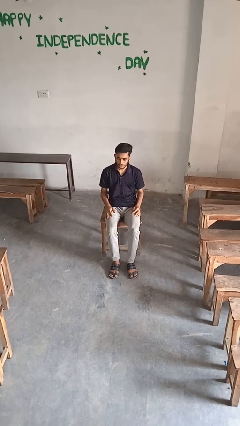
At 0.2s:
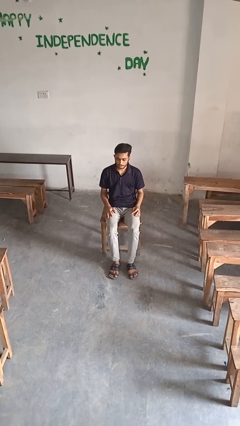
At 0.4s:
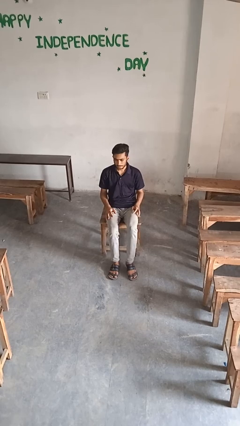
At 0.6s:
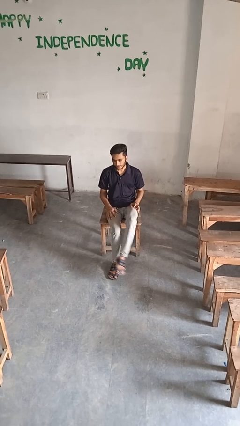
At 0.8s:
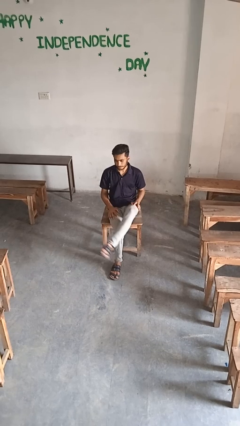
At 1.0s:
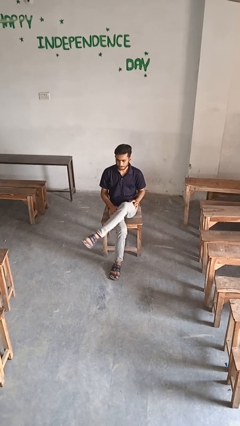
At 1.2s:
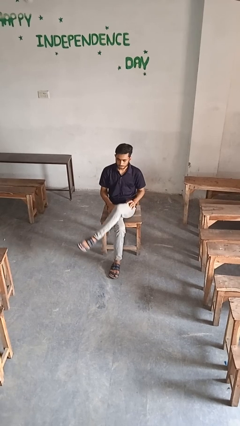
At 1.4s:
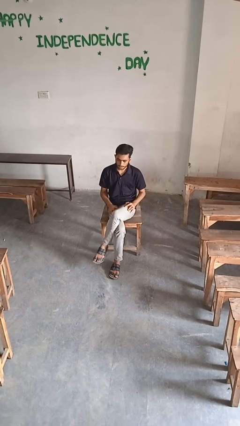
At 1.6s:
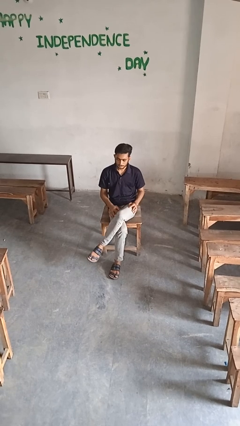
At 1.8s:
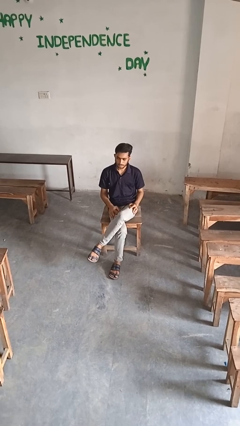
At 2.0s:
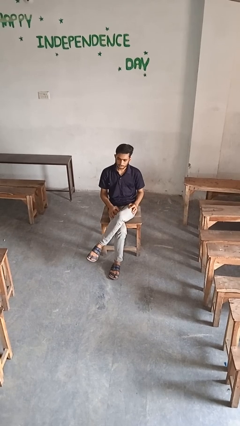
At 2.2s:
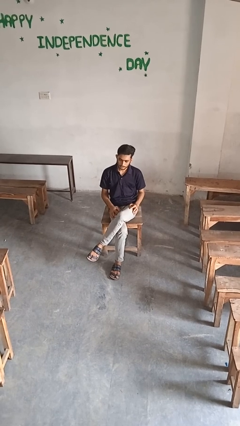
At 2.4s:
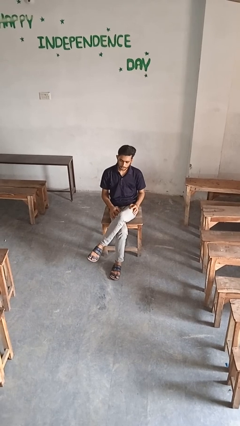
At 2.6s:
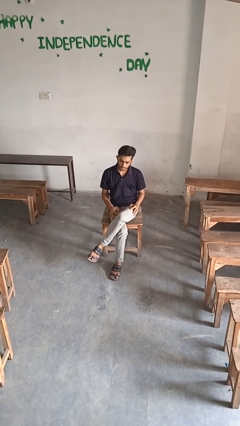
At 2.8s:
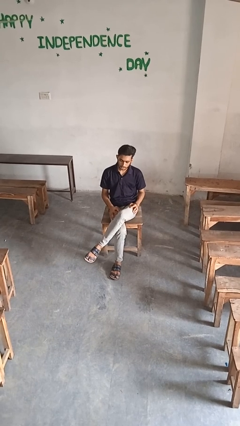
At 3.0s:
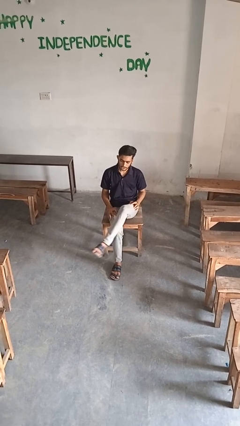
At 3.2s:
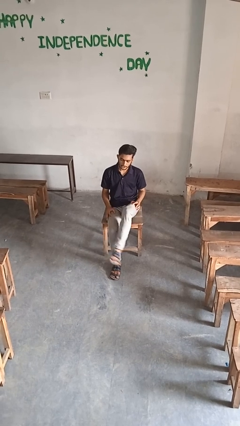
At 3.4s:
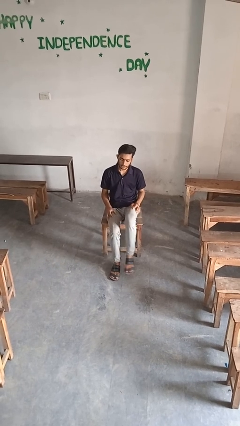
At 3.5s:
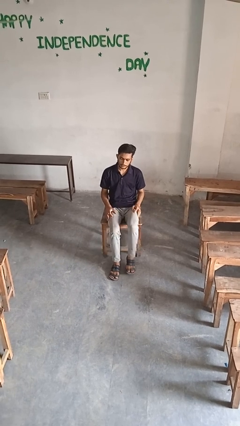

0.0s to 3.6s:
person crosses legs

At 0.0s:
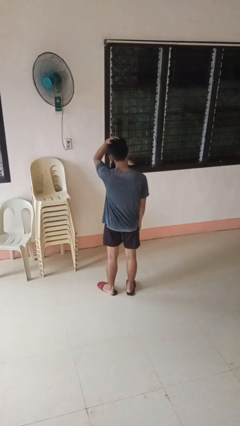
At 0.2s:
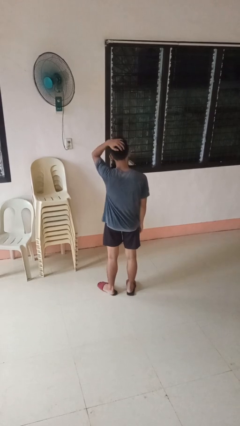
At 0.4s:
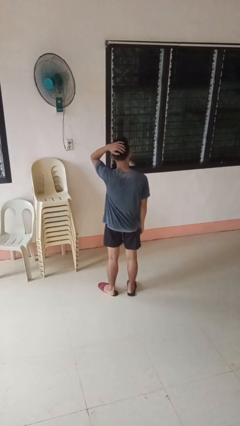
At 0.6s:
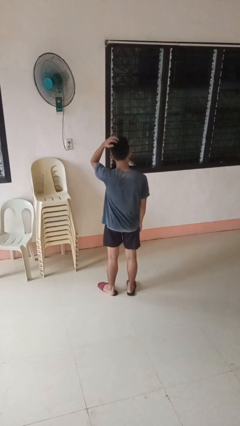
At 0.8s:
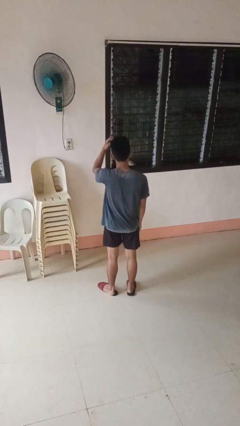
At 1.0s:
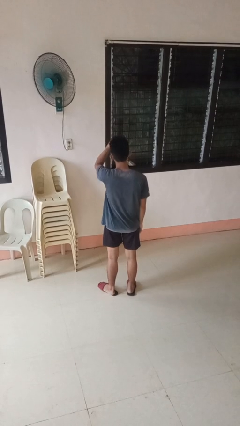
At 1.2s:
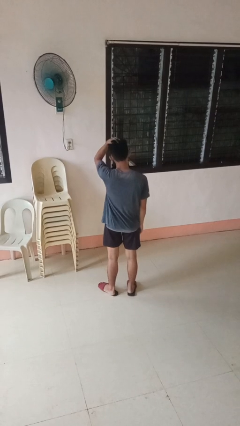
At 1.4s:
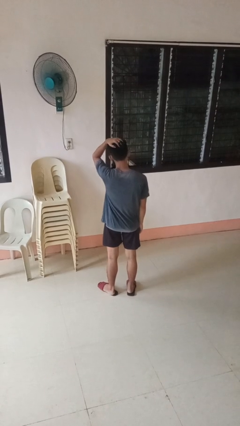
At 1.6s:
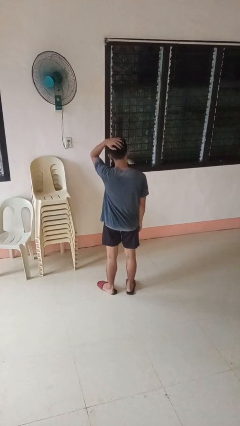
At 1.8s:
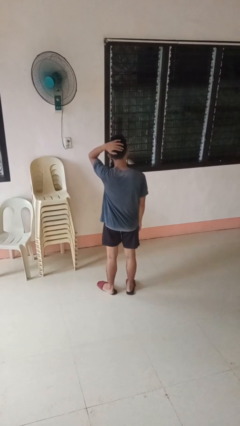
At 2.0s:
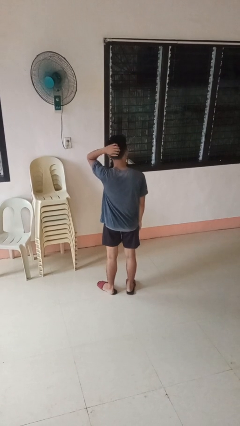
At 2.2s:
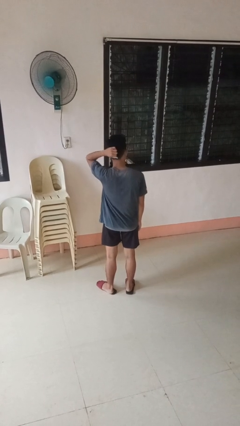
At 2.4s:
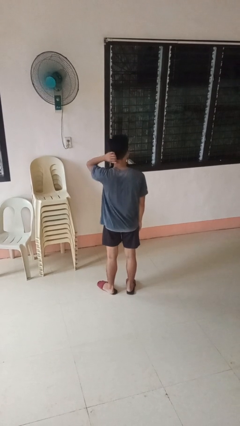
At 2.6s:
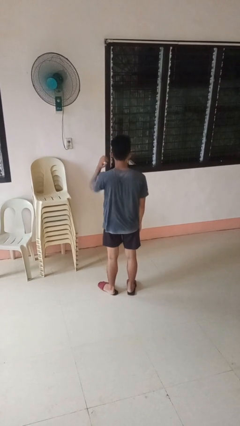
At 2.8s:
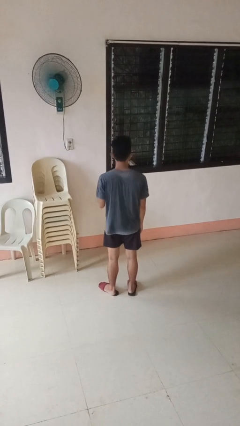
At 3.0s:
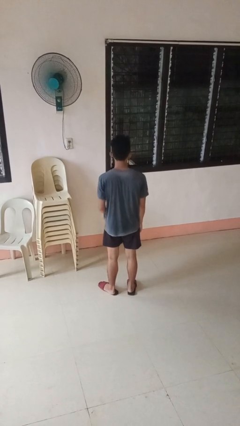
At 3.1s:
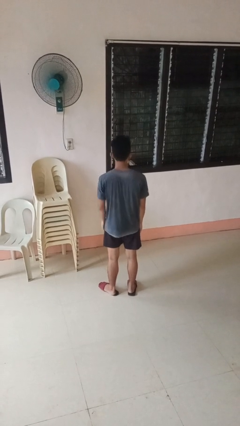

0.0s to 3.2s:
person strokes hair

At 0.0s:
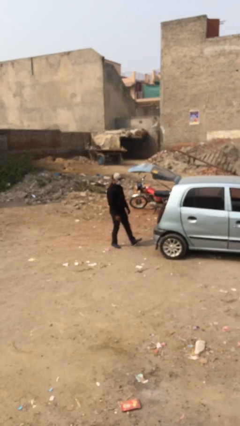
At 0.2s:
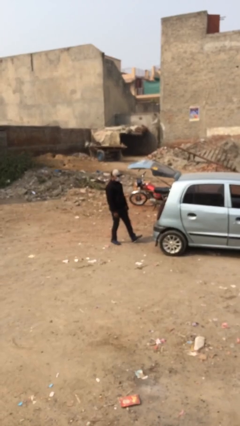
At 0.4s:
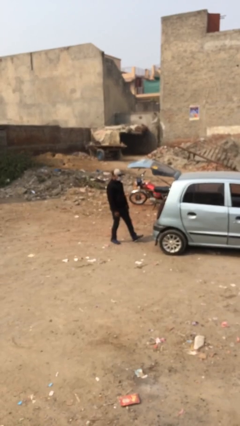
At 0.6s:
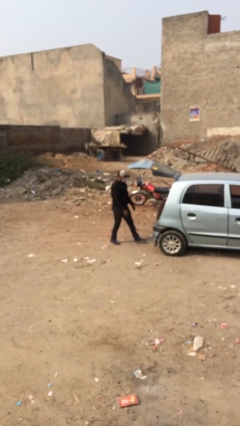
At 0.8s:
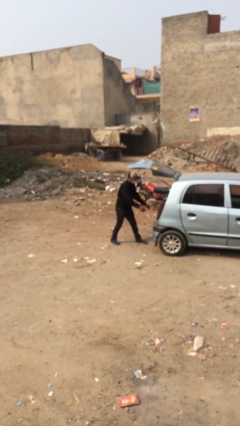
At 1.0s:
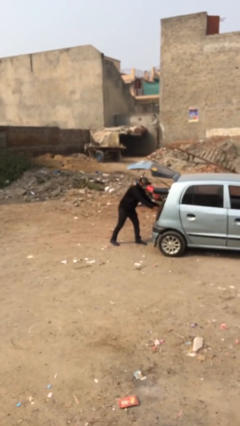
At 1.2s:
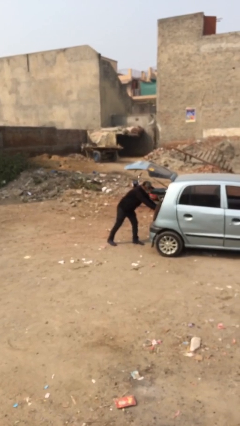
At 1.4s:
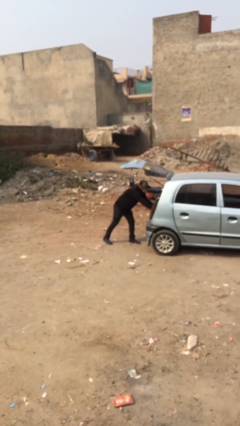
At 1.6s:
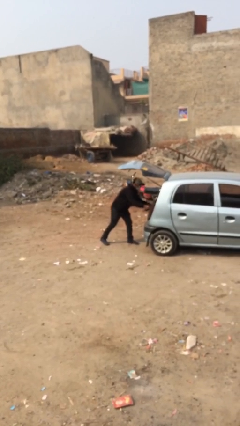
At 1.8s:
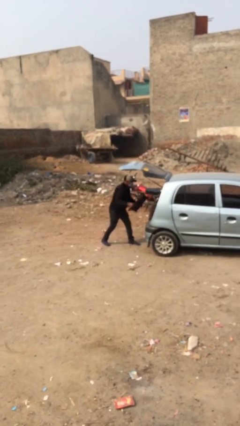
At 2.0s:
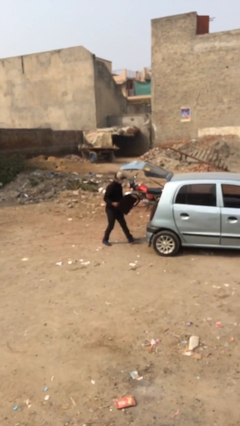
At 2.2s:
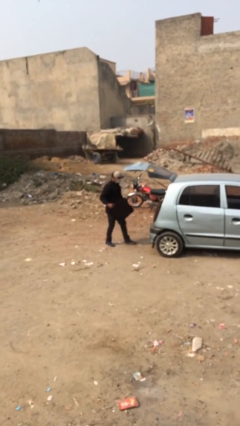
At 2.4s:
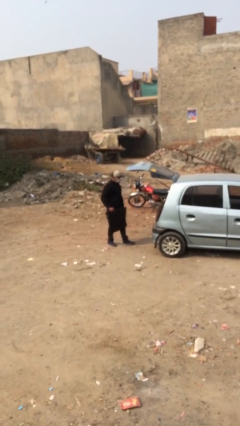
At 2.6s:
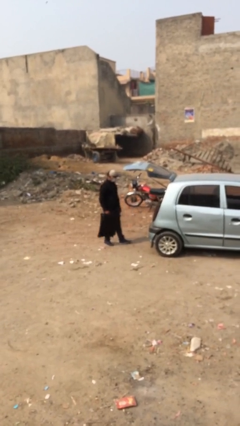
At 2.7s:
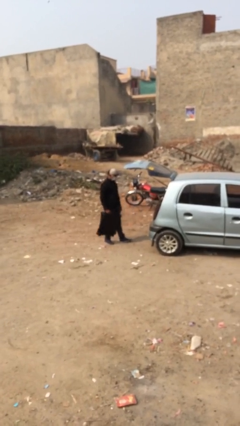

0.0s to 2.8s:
person unloads car

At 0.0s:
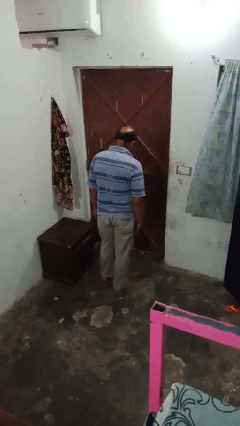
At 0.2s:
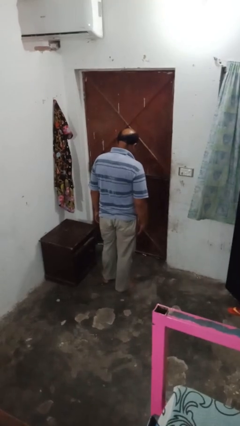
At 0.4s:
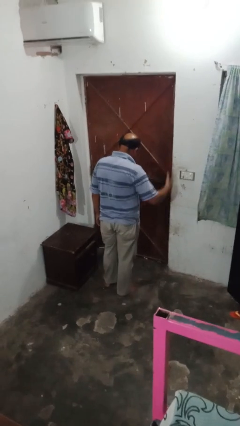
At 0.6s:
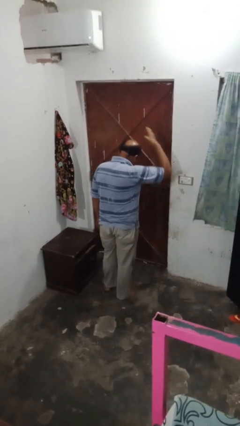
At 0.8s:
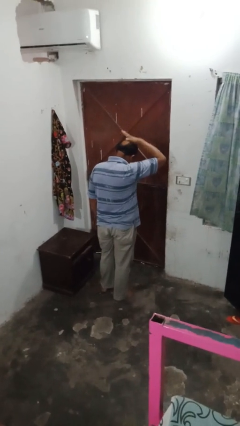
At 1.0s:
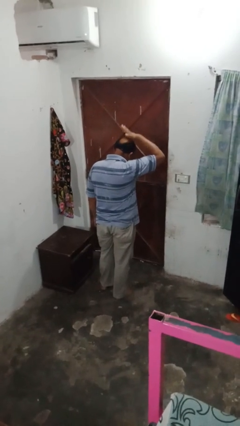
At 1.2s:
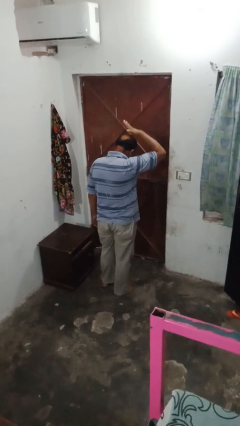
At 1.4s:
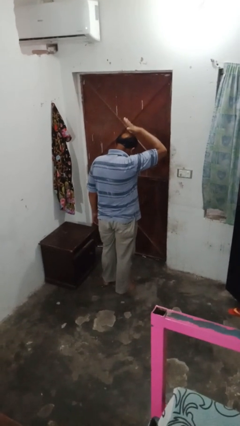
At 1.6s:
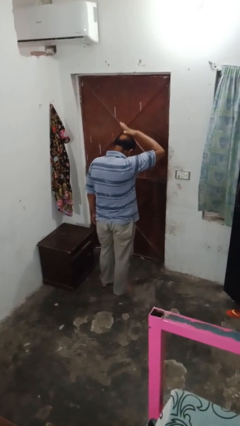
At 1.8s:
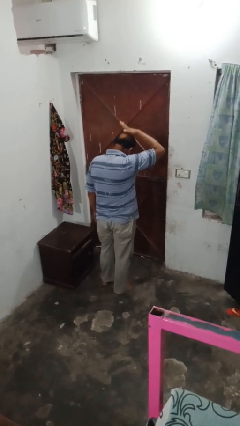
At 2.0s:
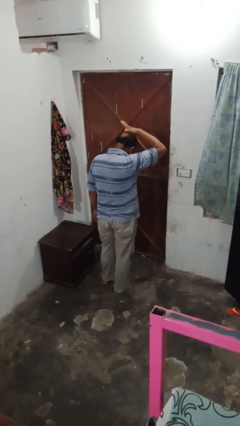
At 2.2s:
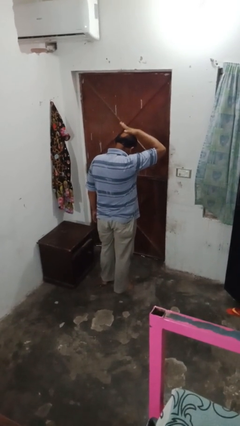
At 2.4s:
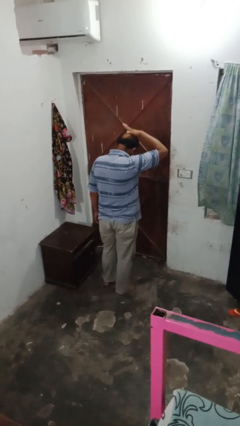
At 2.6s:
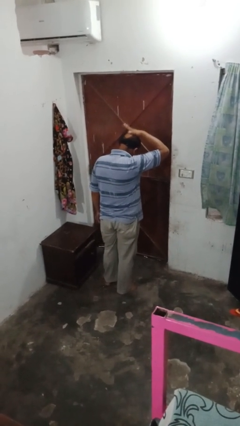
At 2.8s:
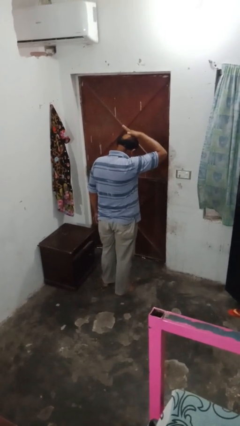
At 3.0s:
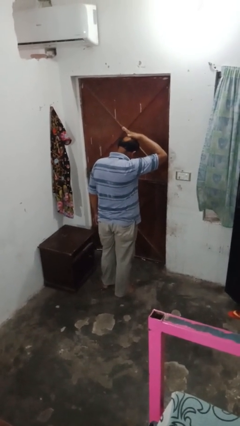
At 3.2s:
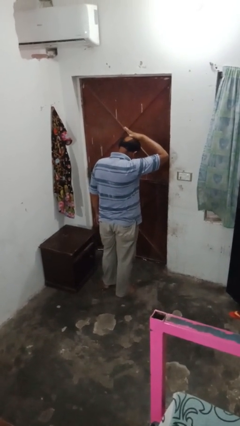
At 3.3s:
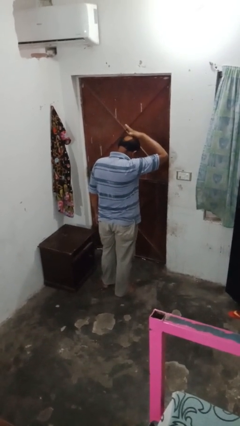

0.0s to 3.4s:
person pats head

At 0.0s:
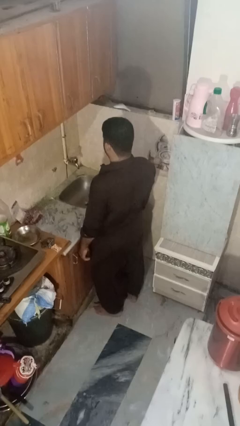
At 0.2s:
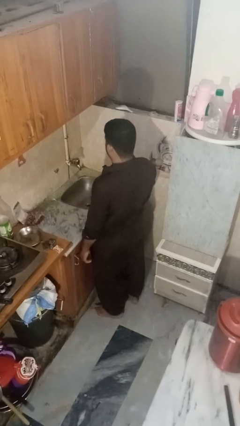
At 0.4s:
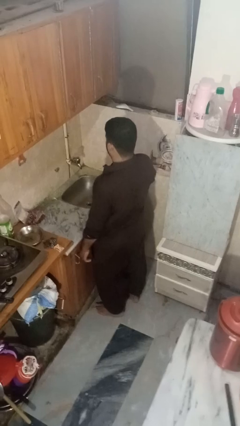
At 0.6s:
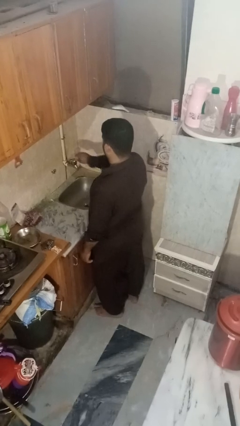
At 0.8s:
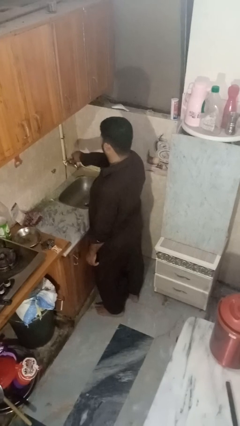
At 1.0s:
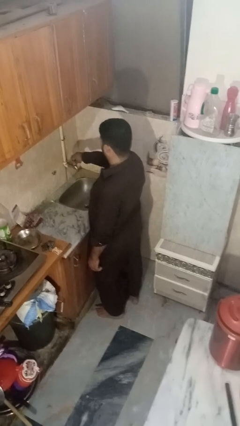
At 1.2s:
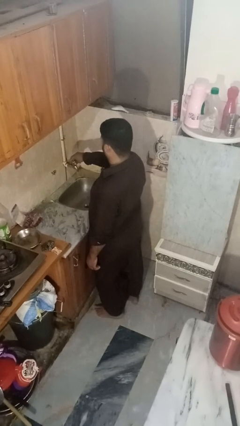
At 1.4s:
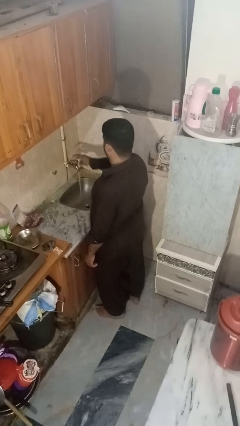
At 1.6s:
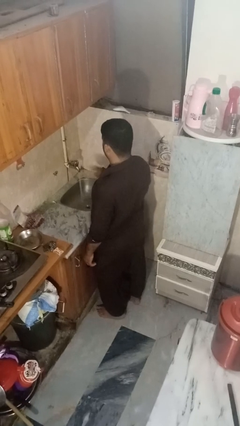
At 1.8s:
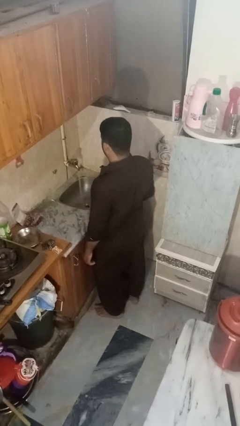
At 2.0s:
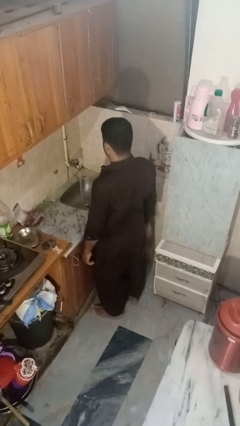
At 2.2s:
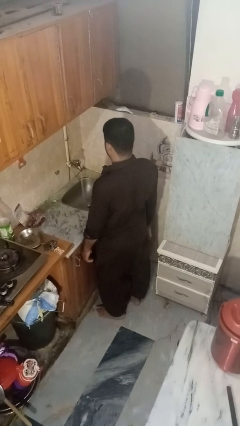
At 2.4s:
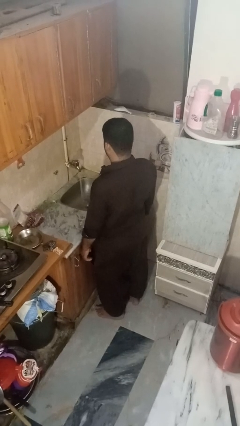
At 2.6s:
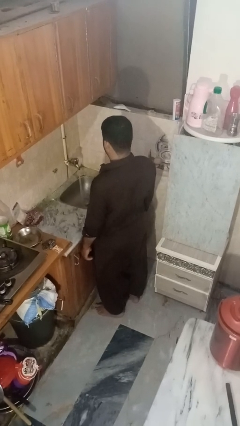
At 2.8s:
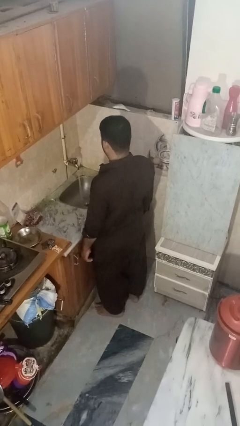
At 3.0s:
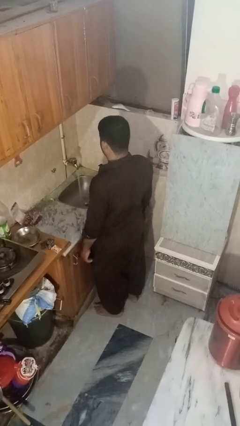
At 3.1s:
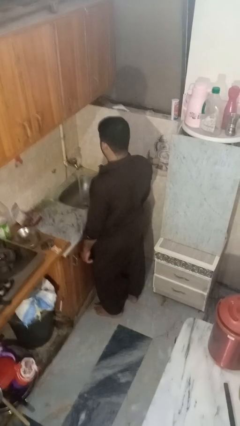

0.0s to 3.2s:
person turns on faucet

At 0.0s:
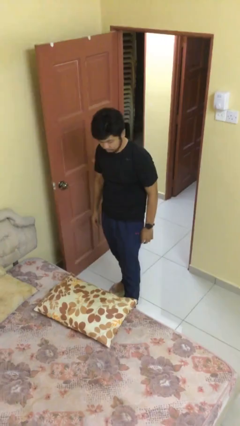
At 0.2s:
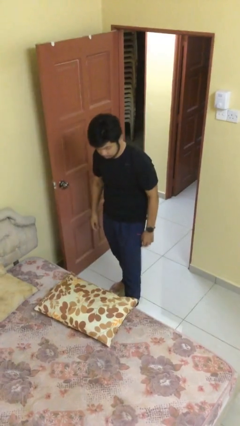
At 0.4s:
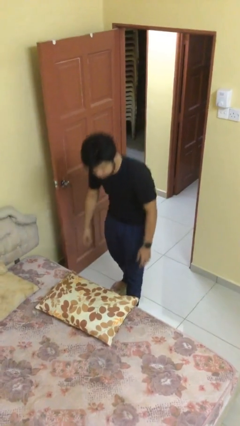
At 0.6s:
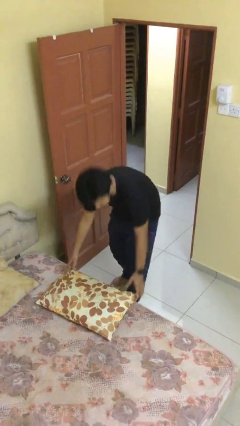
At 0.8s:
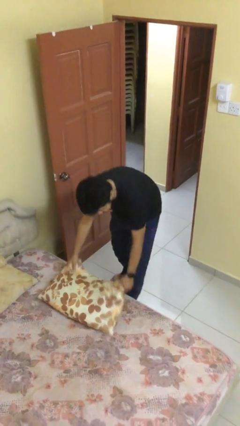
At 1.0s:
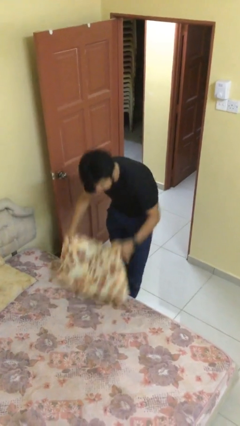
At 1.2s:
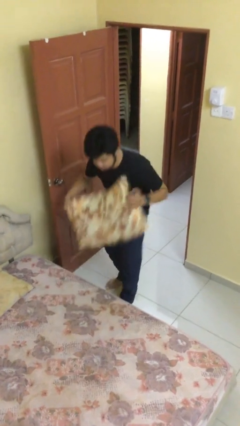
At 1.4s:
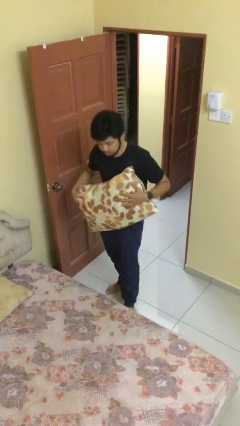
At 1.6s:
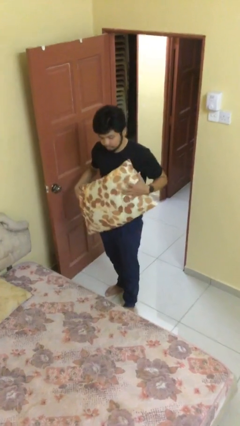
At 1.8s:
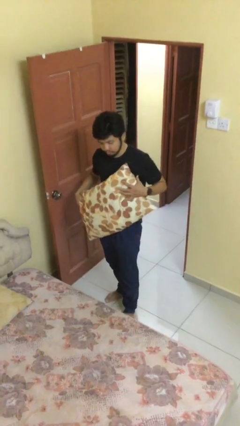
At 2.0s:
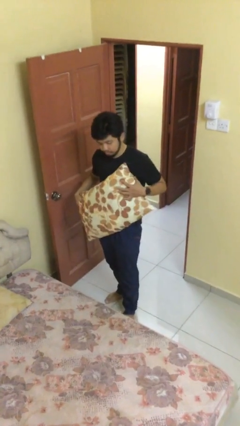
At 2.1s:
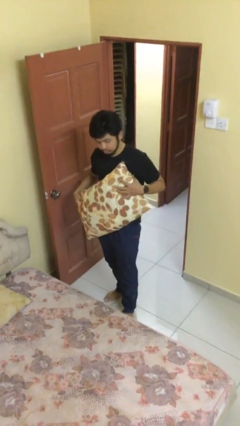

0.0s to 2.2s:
person picks up object from bed
